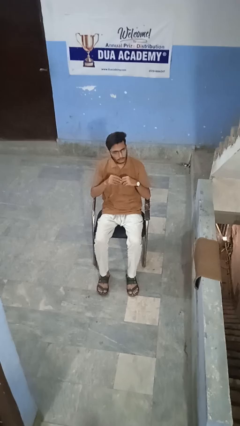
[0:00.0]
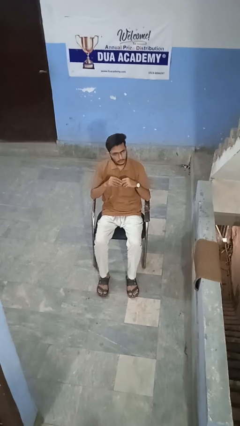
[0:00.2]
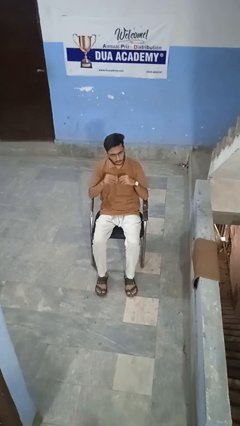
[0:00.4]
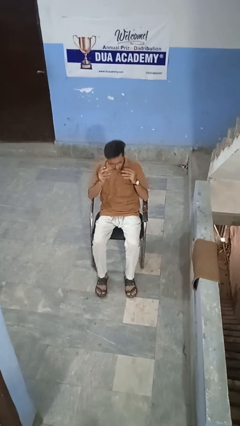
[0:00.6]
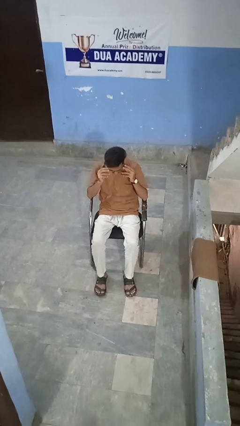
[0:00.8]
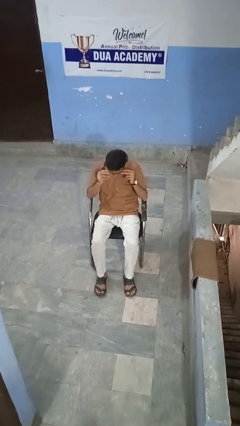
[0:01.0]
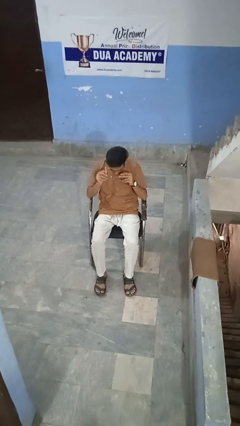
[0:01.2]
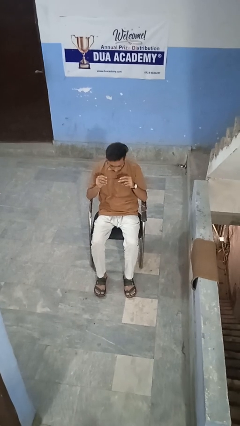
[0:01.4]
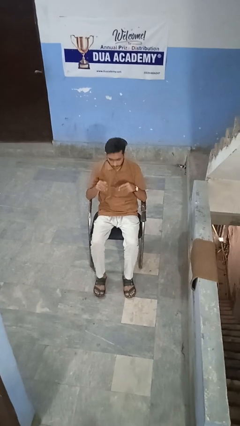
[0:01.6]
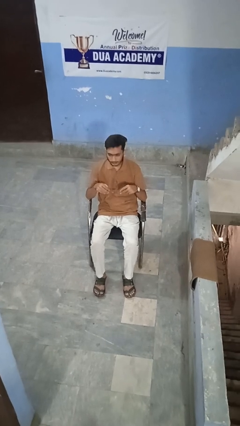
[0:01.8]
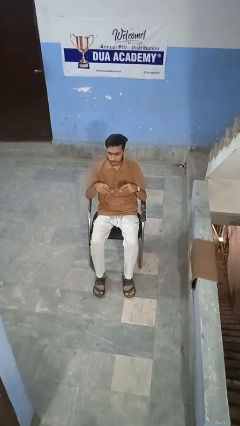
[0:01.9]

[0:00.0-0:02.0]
person takes off glasses

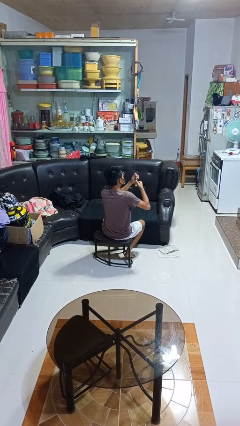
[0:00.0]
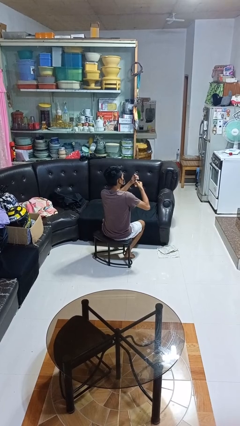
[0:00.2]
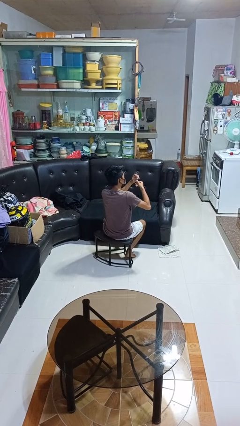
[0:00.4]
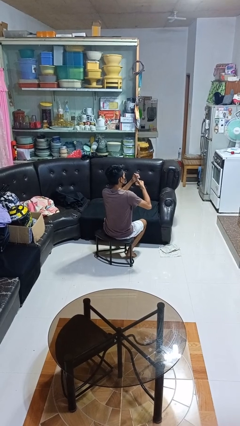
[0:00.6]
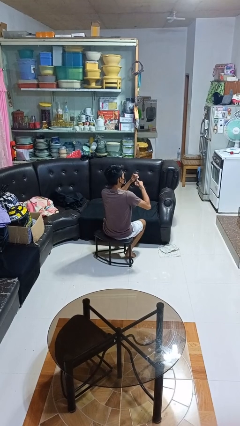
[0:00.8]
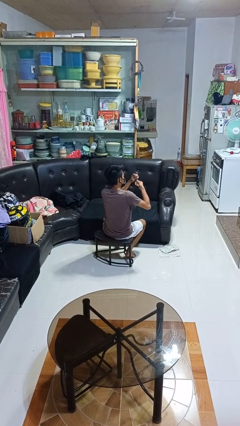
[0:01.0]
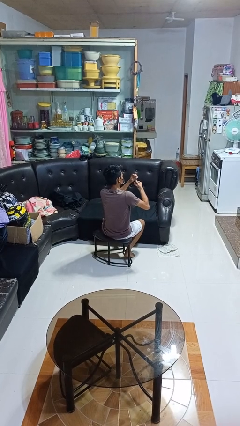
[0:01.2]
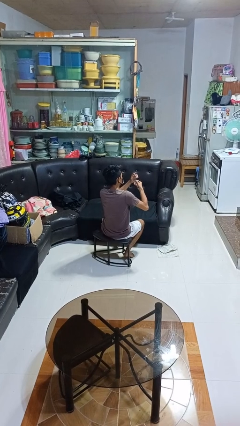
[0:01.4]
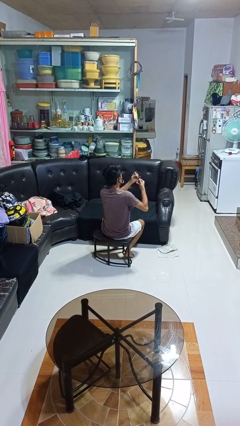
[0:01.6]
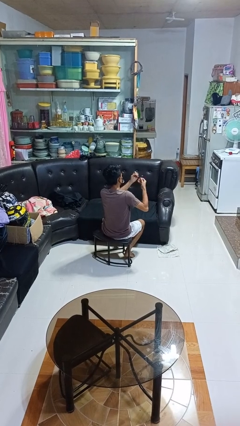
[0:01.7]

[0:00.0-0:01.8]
person clips fingernails

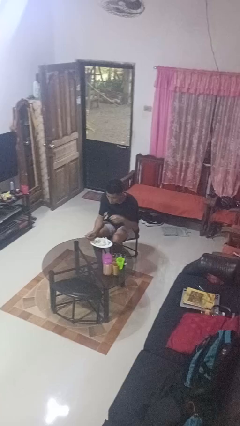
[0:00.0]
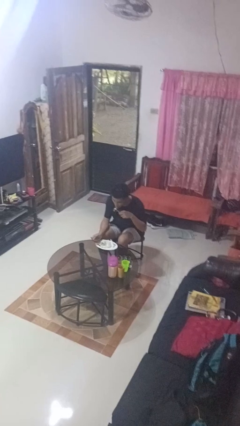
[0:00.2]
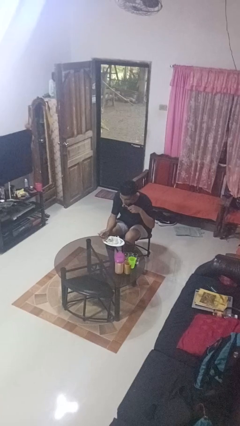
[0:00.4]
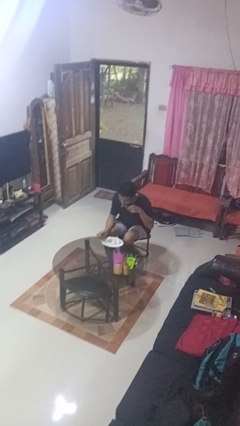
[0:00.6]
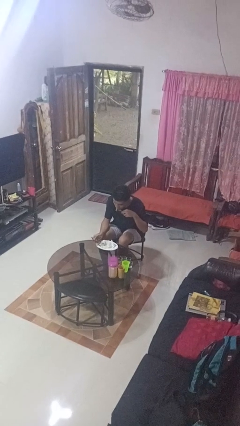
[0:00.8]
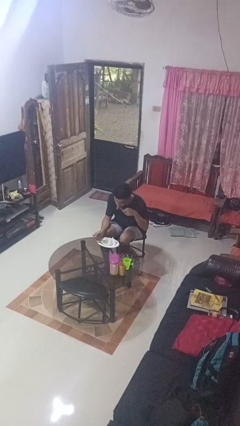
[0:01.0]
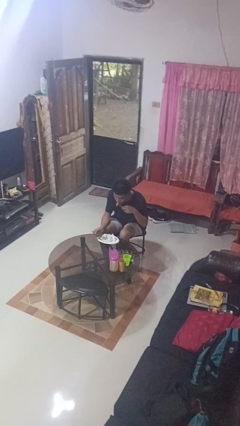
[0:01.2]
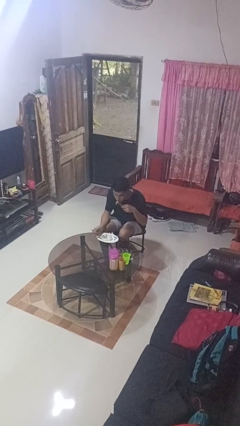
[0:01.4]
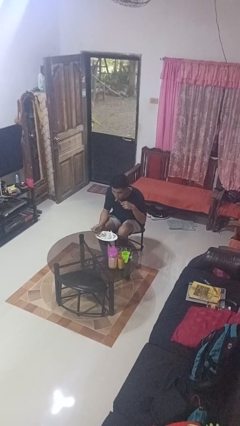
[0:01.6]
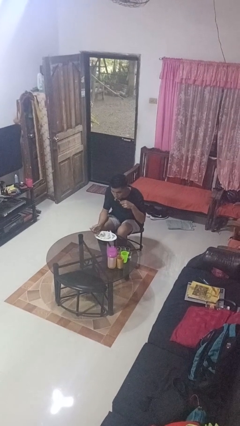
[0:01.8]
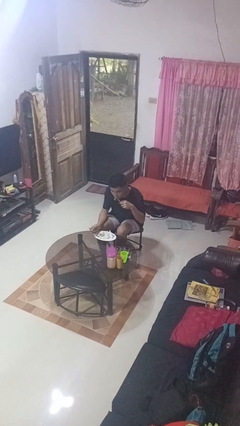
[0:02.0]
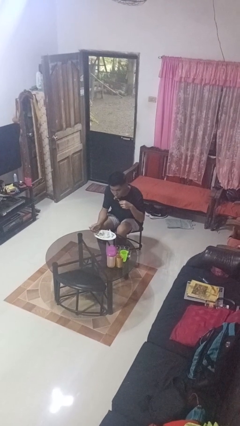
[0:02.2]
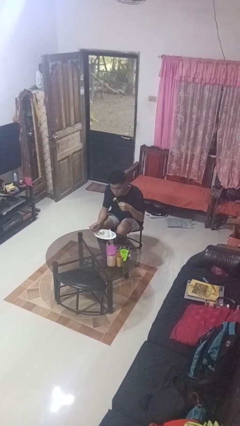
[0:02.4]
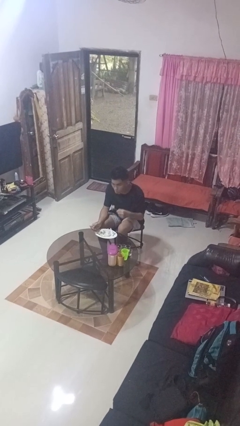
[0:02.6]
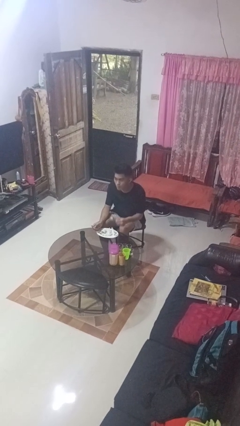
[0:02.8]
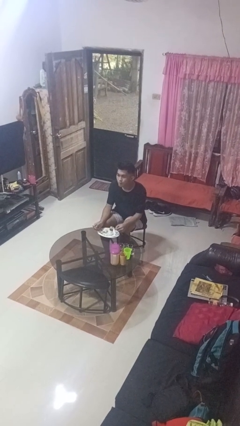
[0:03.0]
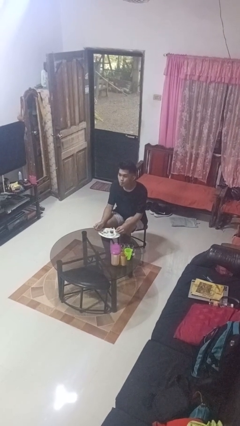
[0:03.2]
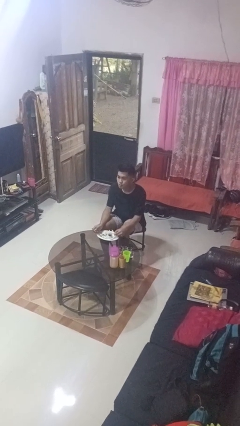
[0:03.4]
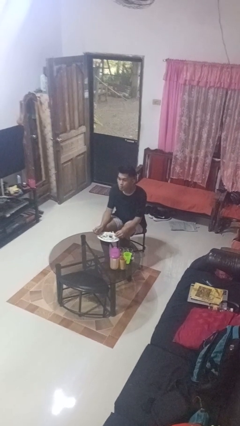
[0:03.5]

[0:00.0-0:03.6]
person eats with utensil

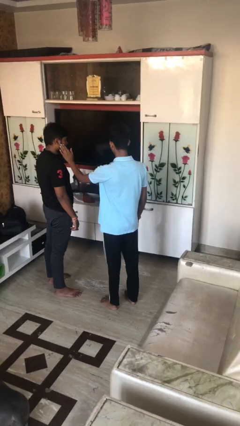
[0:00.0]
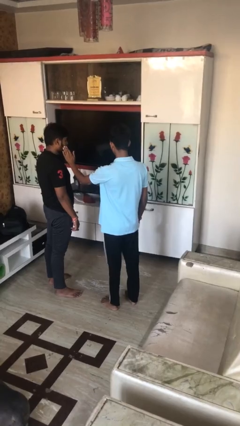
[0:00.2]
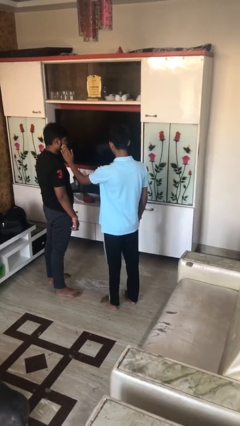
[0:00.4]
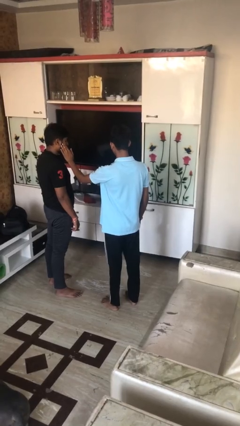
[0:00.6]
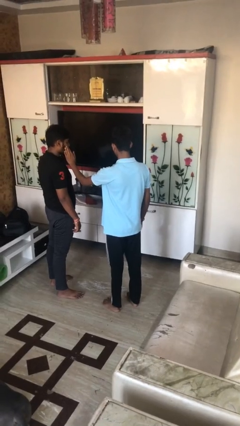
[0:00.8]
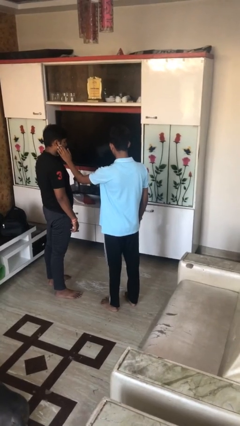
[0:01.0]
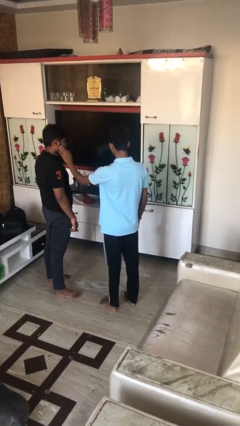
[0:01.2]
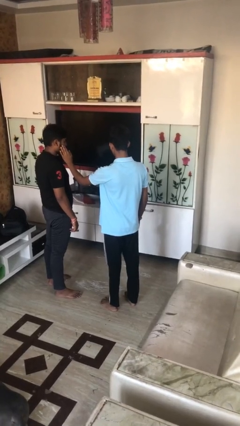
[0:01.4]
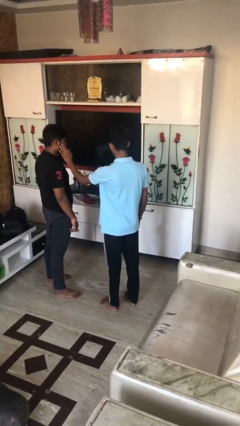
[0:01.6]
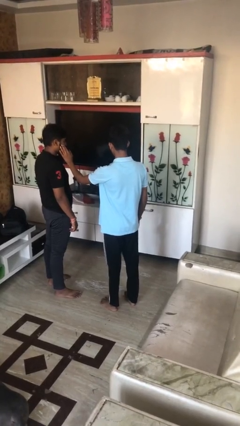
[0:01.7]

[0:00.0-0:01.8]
person touches face of person

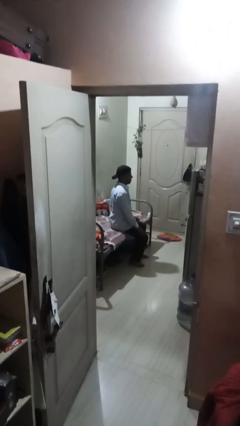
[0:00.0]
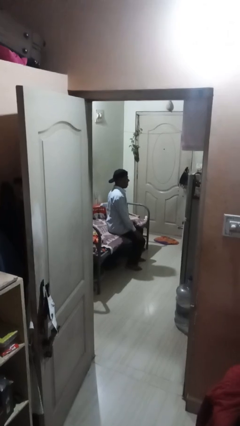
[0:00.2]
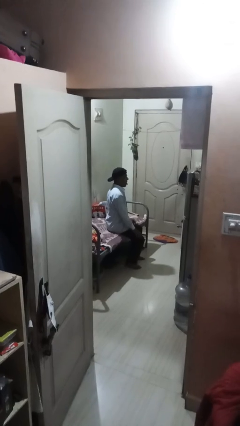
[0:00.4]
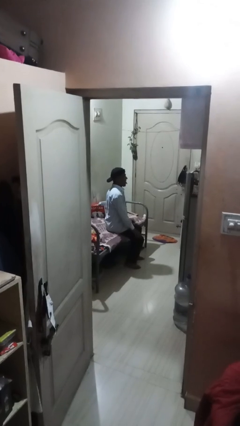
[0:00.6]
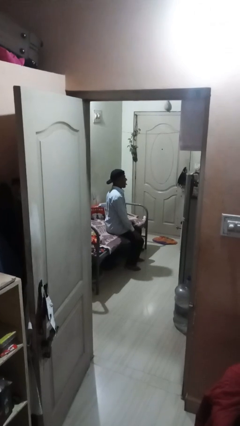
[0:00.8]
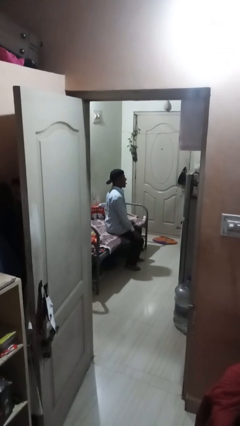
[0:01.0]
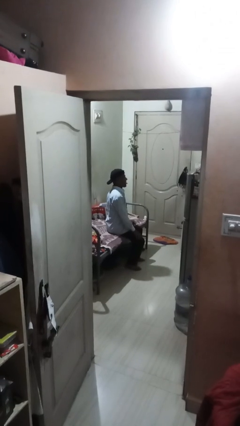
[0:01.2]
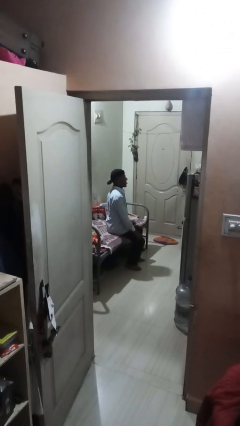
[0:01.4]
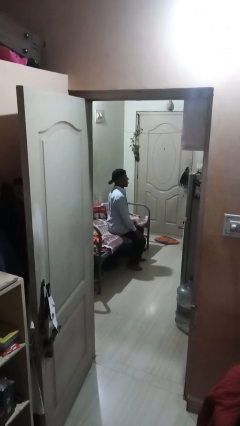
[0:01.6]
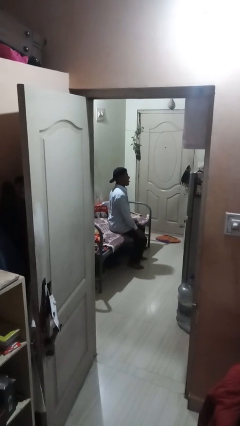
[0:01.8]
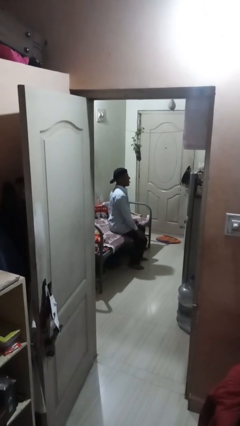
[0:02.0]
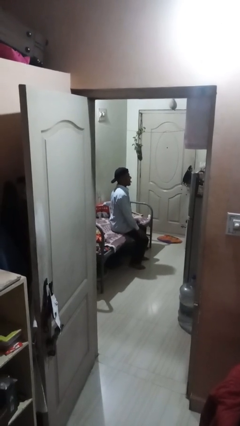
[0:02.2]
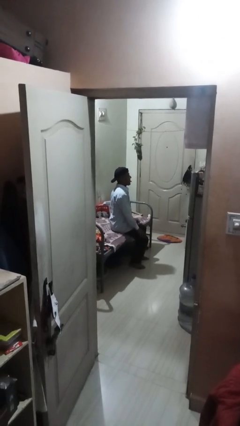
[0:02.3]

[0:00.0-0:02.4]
person sticks out tongue

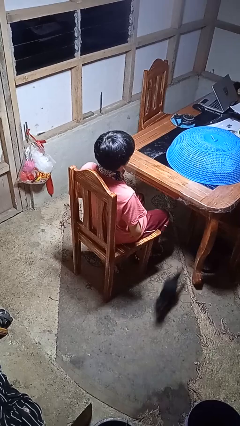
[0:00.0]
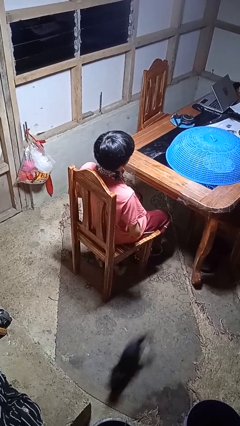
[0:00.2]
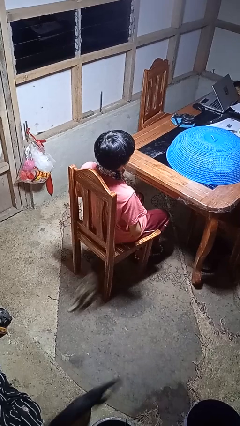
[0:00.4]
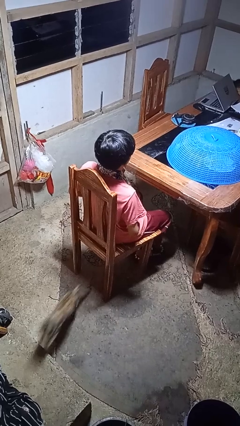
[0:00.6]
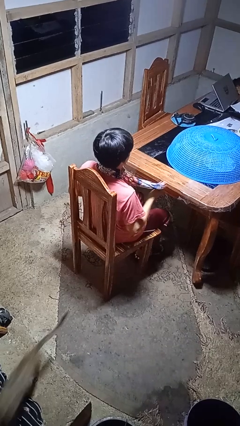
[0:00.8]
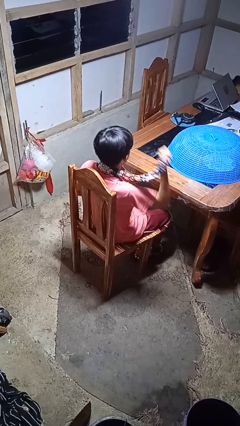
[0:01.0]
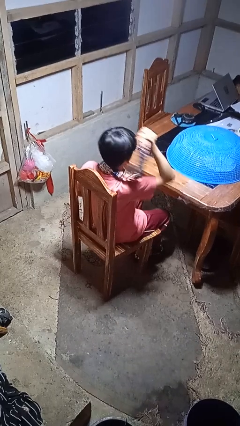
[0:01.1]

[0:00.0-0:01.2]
person takes off scarf

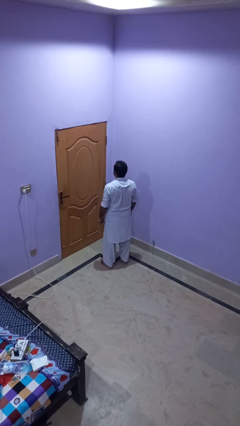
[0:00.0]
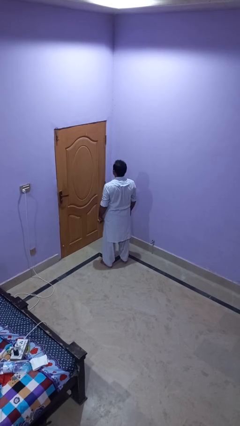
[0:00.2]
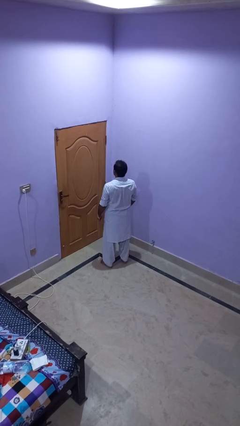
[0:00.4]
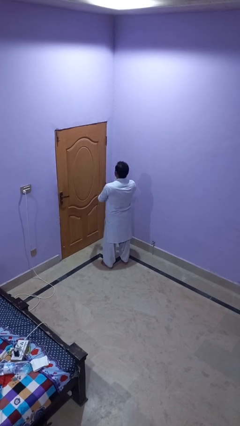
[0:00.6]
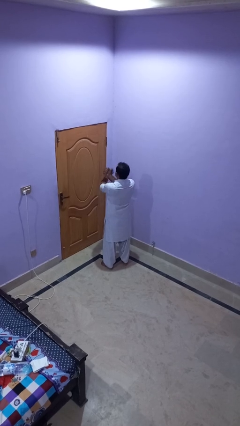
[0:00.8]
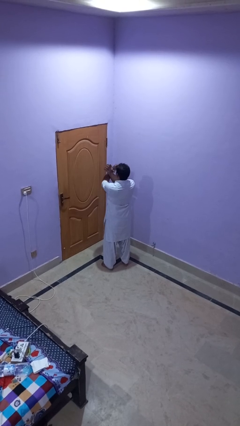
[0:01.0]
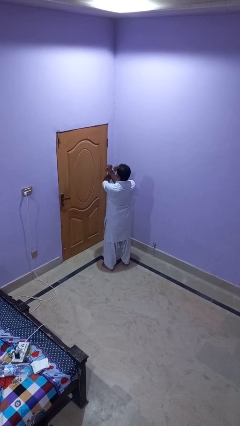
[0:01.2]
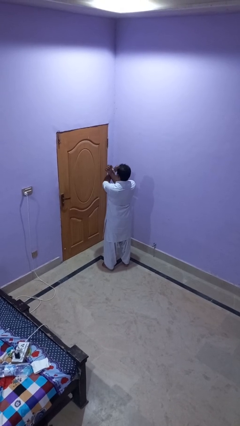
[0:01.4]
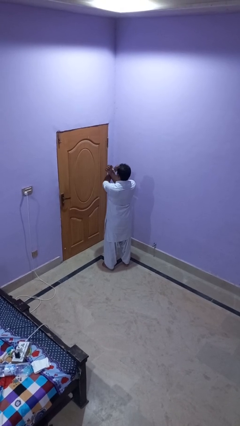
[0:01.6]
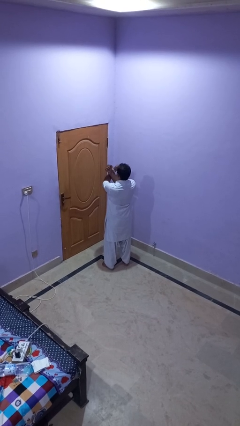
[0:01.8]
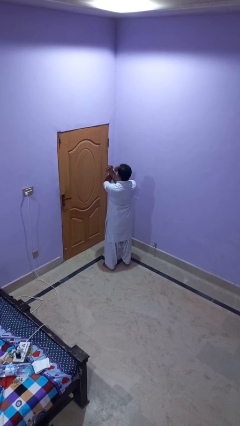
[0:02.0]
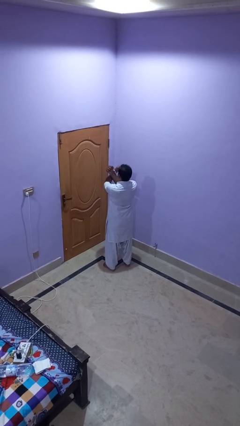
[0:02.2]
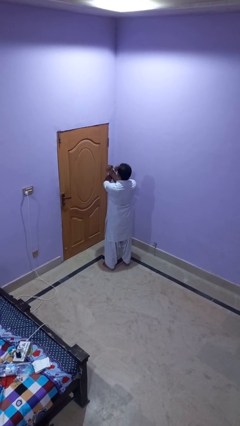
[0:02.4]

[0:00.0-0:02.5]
person crosses arms

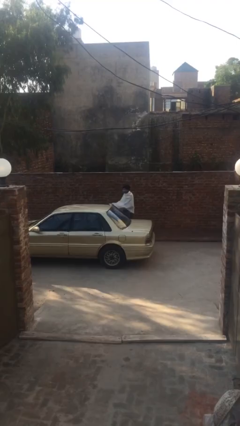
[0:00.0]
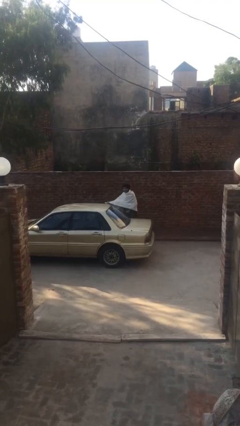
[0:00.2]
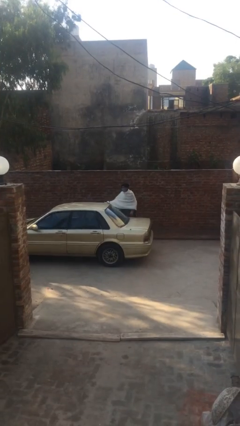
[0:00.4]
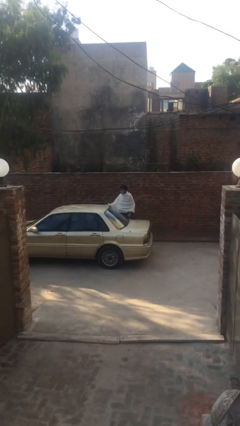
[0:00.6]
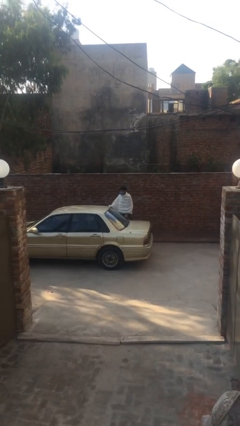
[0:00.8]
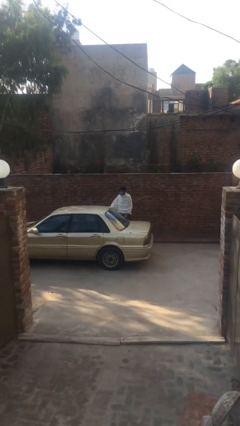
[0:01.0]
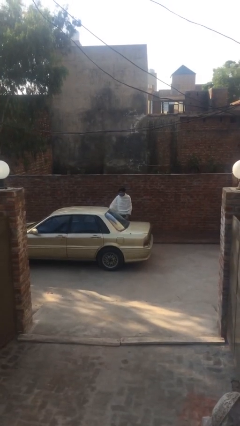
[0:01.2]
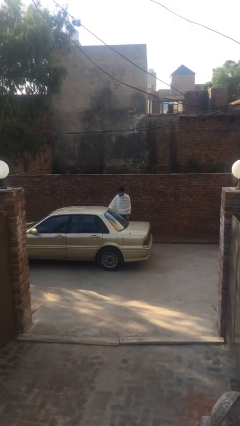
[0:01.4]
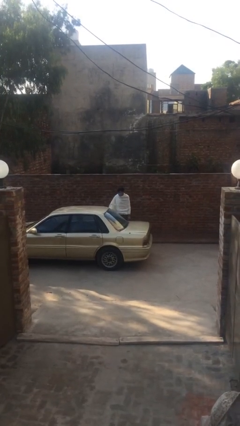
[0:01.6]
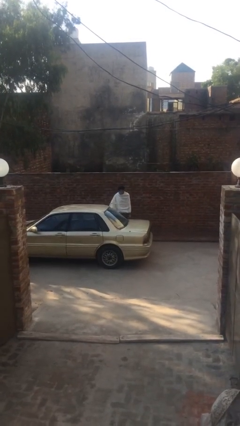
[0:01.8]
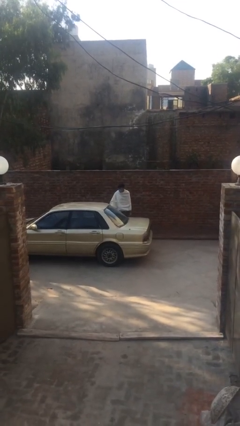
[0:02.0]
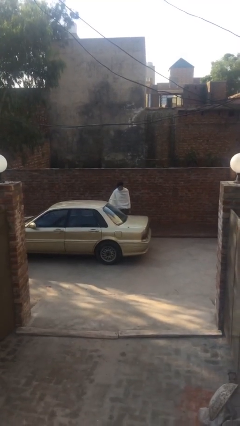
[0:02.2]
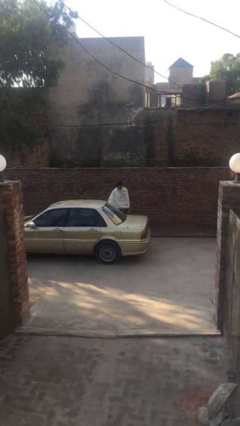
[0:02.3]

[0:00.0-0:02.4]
person closes car door
